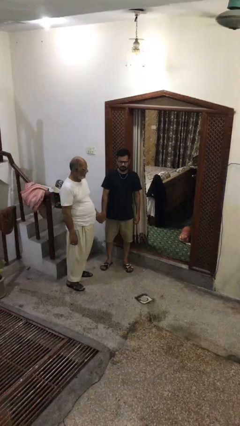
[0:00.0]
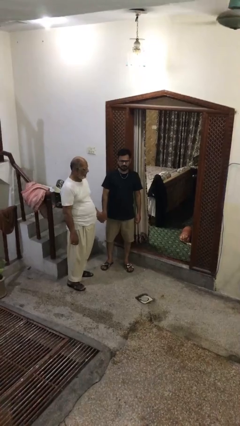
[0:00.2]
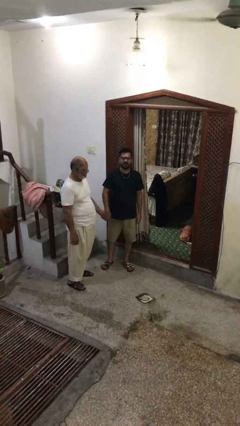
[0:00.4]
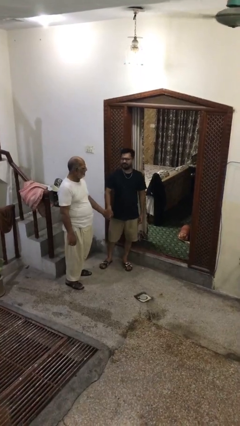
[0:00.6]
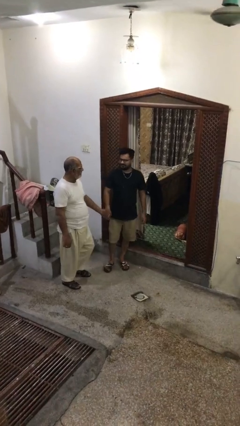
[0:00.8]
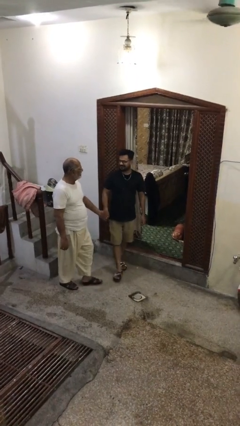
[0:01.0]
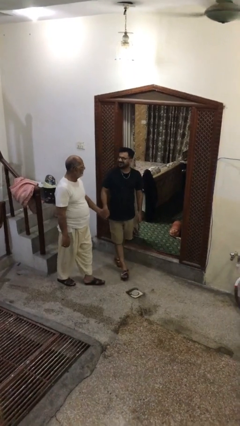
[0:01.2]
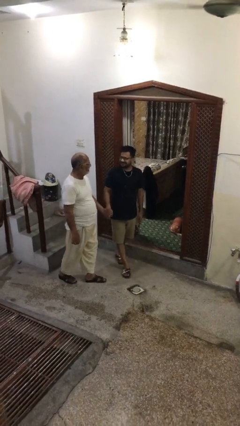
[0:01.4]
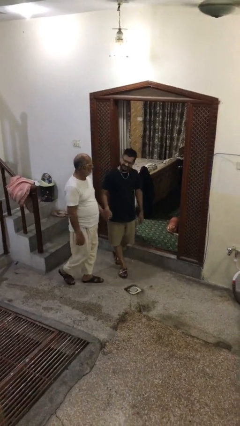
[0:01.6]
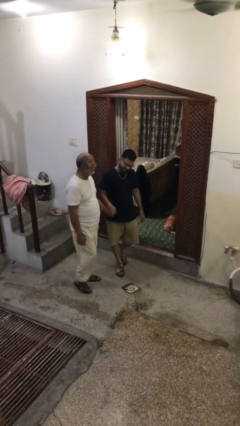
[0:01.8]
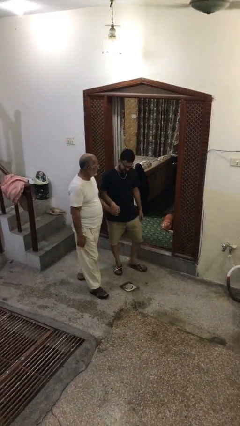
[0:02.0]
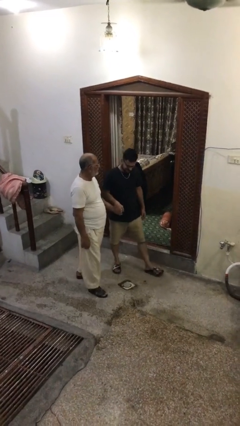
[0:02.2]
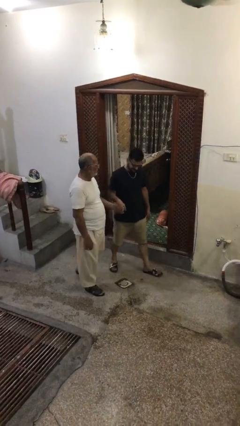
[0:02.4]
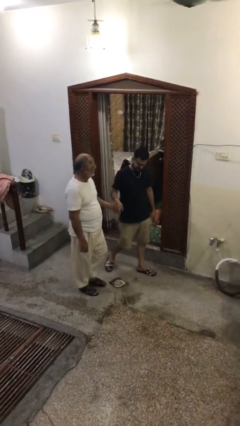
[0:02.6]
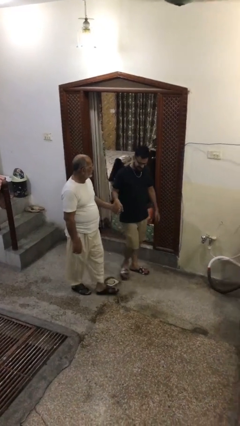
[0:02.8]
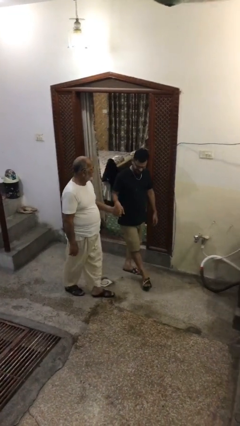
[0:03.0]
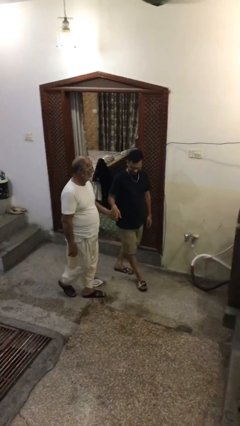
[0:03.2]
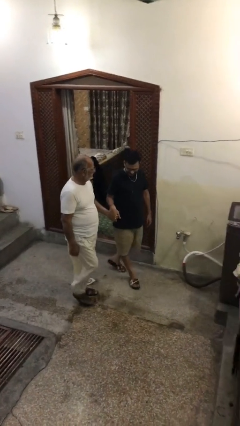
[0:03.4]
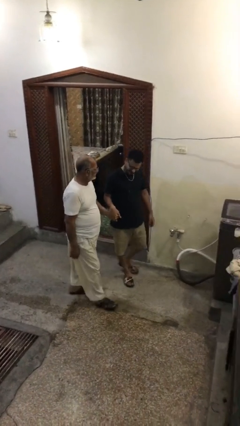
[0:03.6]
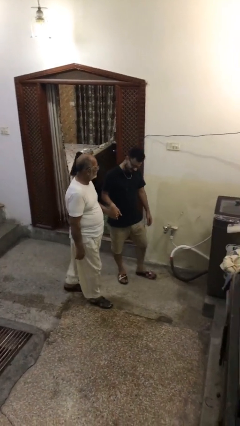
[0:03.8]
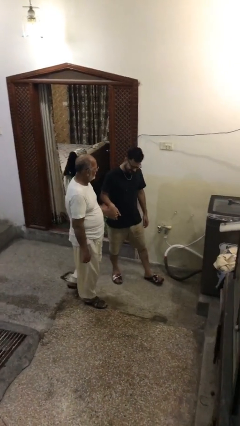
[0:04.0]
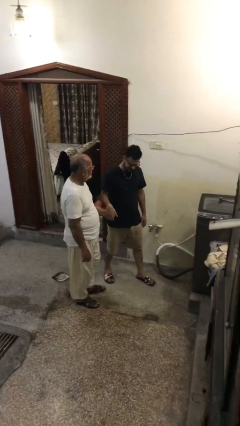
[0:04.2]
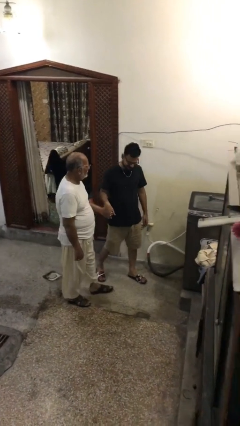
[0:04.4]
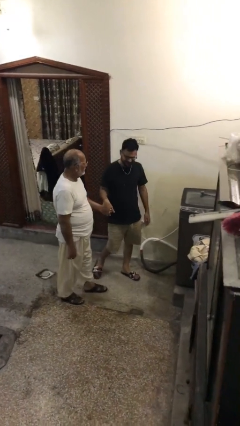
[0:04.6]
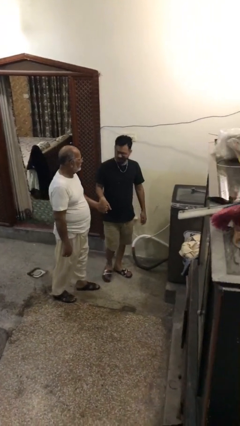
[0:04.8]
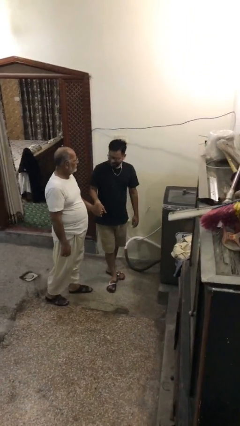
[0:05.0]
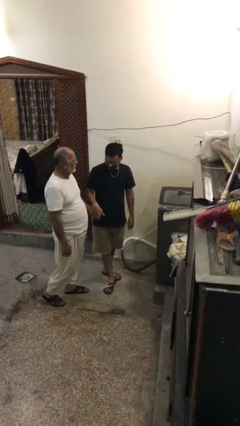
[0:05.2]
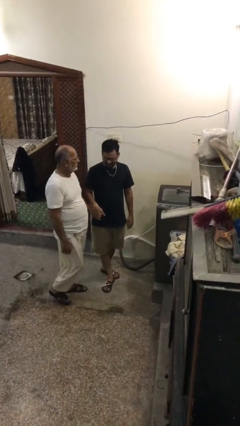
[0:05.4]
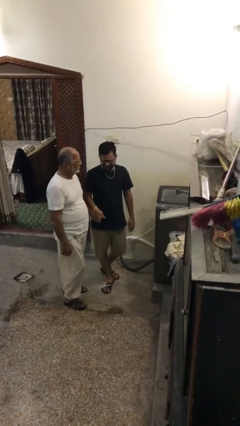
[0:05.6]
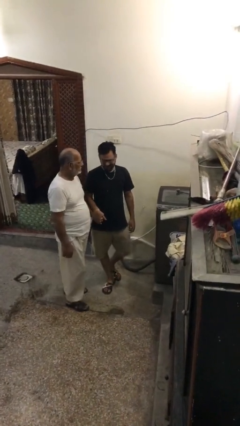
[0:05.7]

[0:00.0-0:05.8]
person holds hand

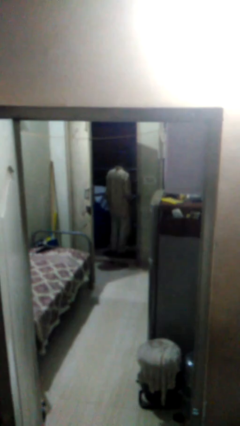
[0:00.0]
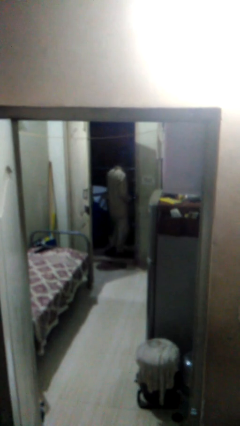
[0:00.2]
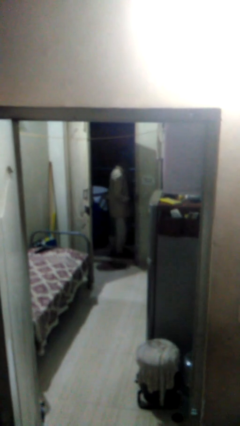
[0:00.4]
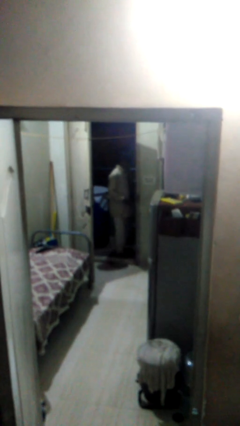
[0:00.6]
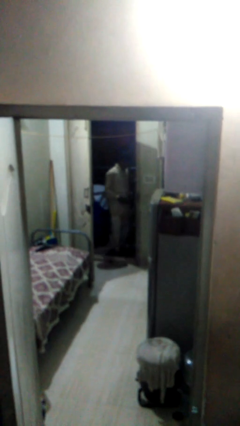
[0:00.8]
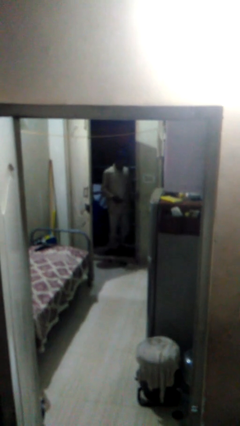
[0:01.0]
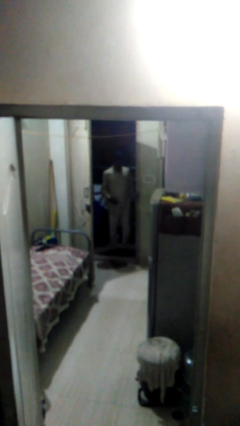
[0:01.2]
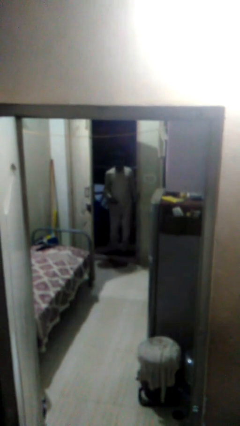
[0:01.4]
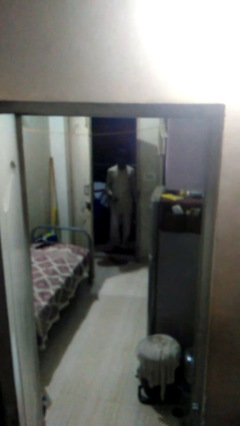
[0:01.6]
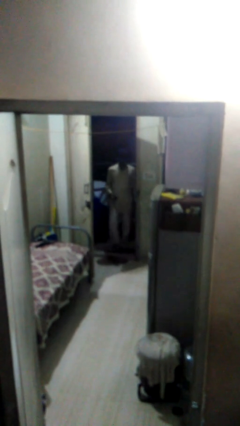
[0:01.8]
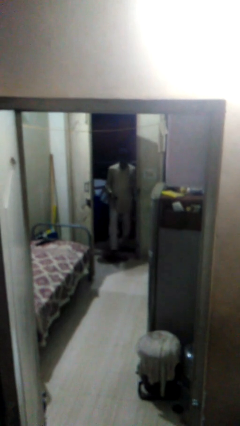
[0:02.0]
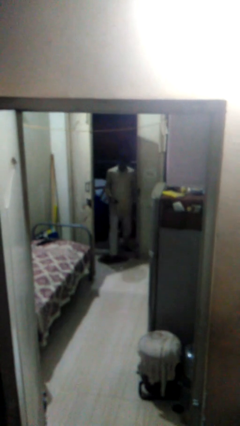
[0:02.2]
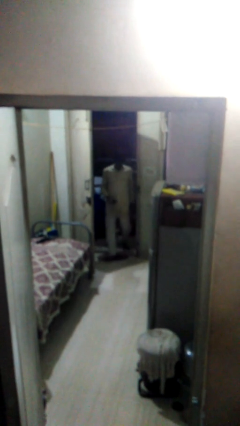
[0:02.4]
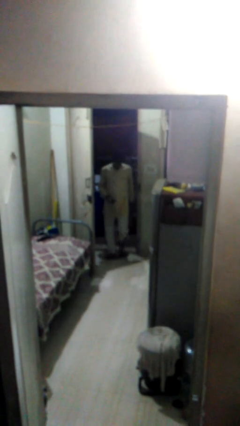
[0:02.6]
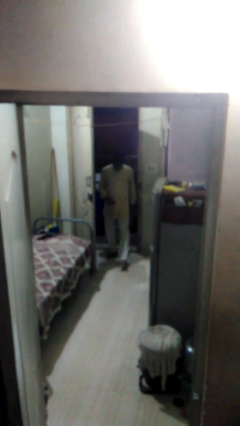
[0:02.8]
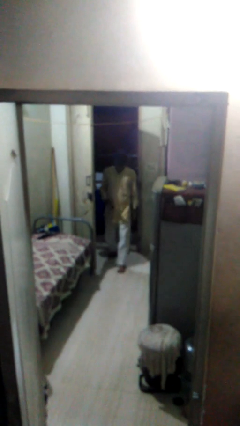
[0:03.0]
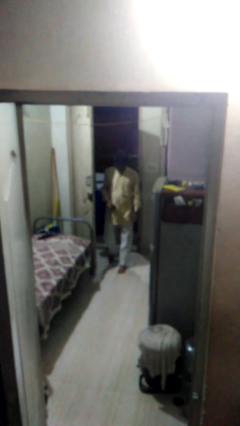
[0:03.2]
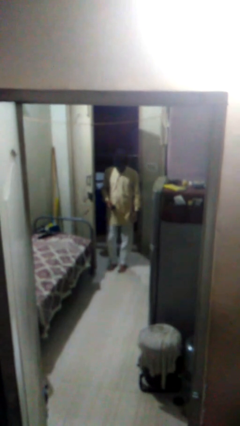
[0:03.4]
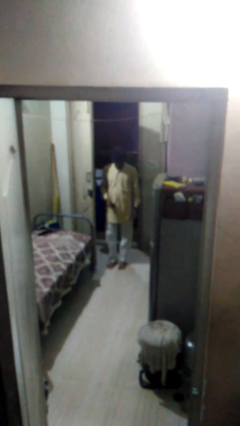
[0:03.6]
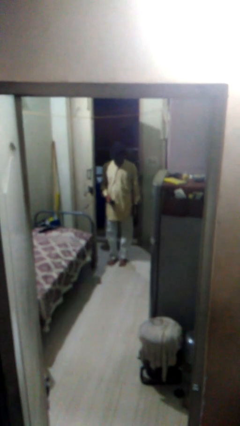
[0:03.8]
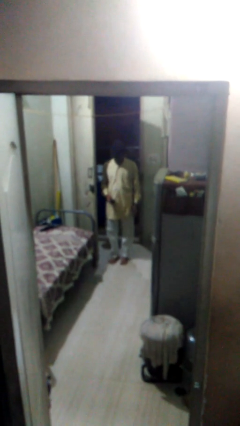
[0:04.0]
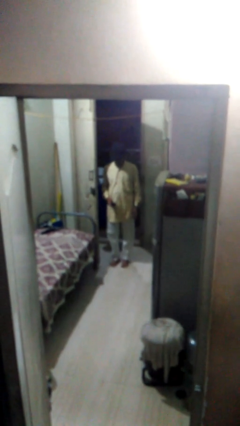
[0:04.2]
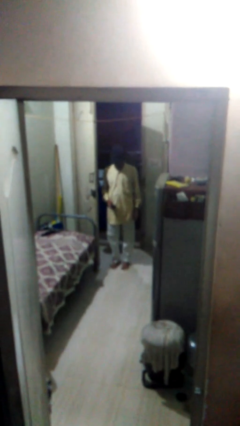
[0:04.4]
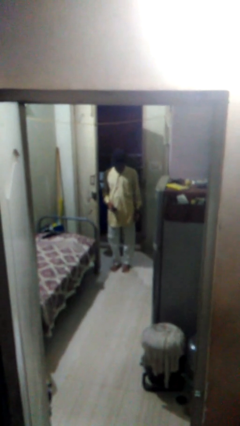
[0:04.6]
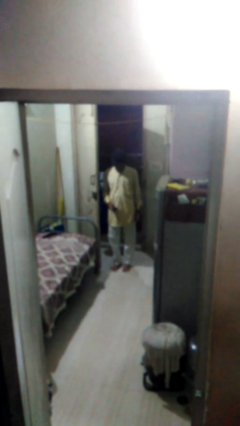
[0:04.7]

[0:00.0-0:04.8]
person enters scene through structure

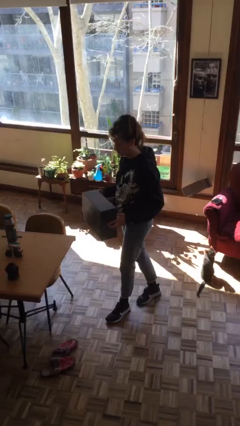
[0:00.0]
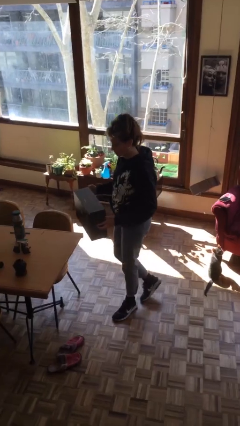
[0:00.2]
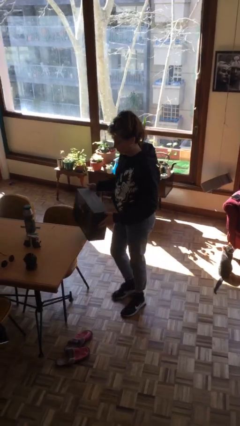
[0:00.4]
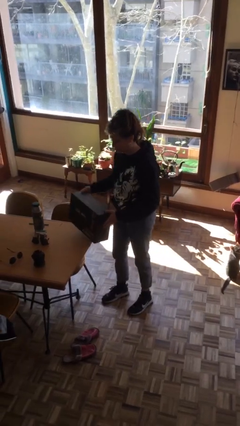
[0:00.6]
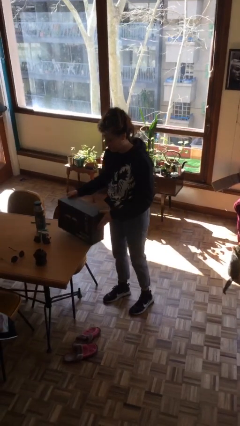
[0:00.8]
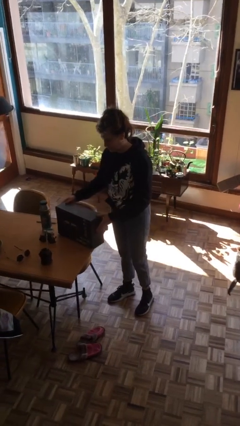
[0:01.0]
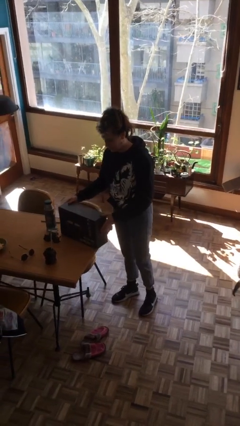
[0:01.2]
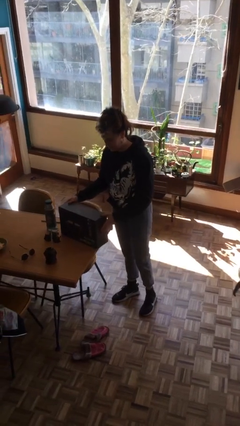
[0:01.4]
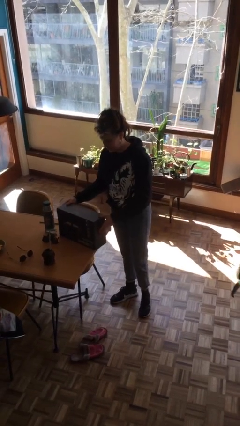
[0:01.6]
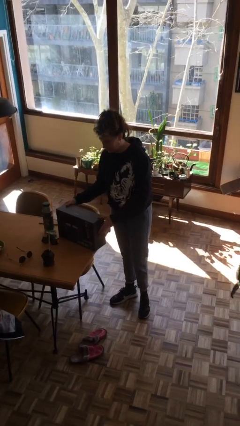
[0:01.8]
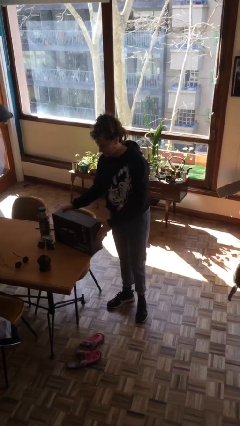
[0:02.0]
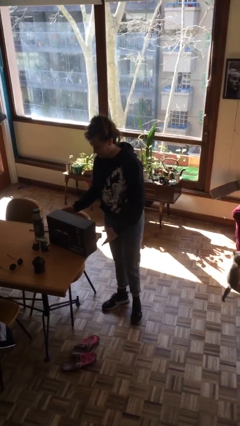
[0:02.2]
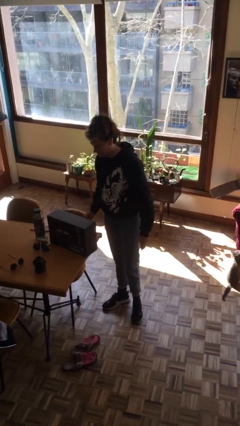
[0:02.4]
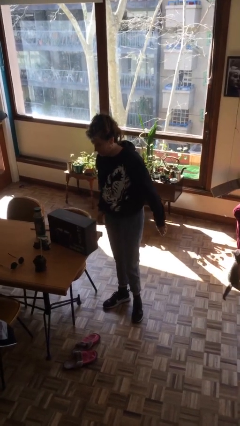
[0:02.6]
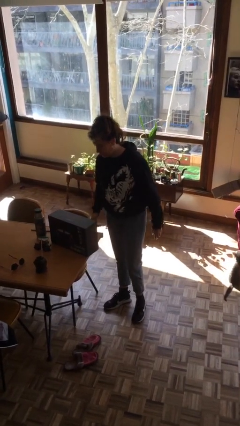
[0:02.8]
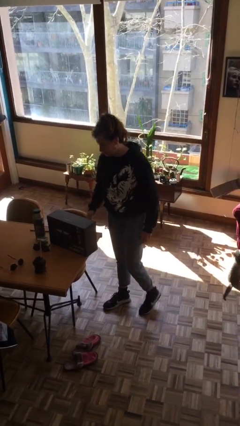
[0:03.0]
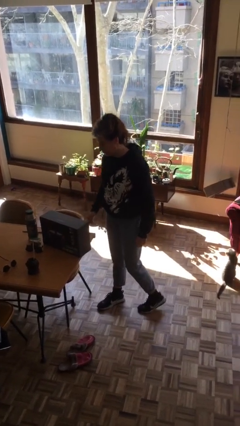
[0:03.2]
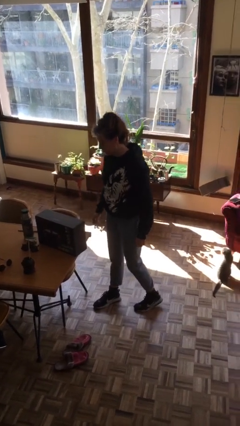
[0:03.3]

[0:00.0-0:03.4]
person puts down object on table

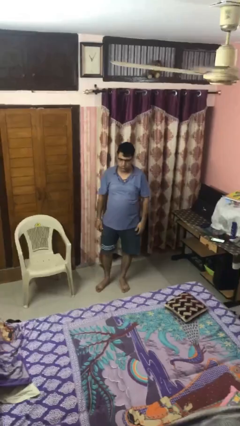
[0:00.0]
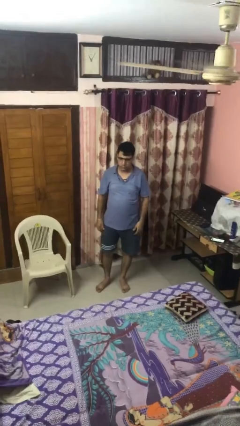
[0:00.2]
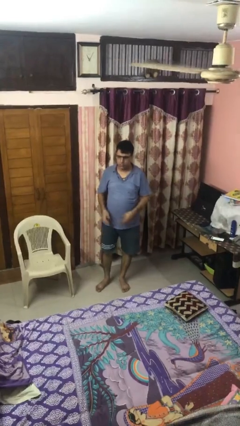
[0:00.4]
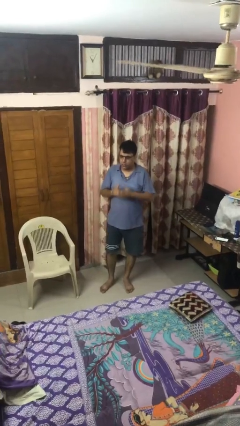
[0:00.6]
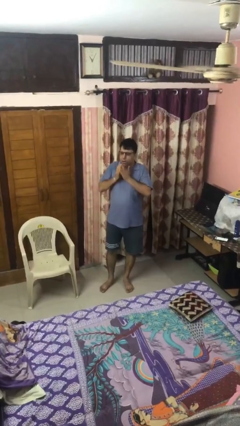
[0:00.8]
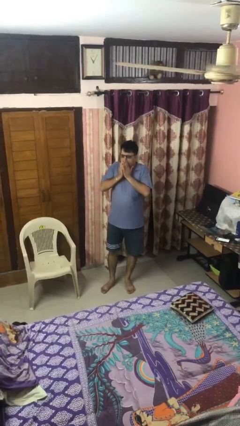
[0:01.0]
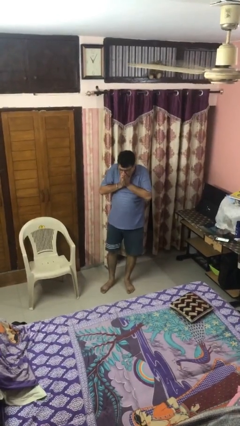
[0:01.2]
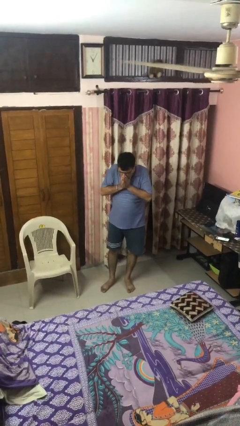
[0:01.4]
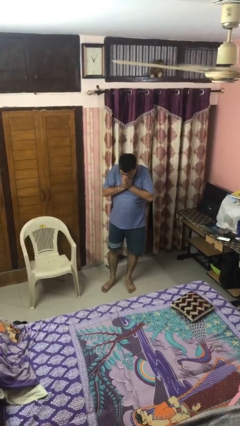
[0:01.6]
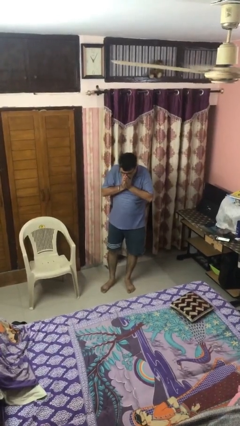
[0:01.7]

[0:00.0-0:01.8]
person sneezes into hand

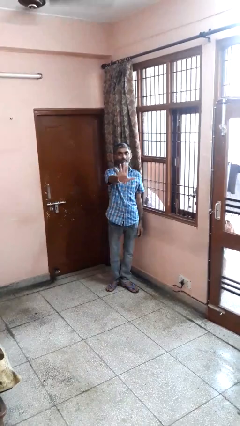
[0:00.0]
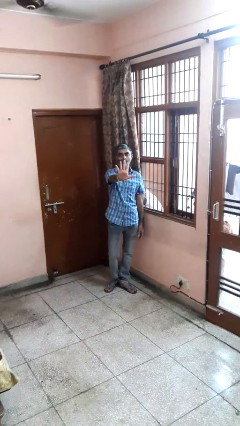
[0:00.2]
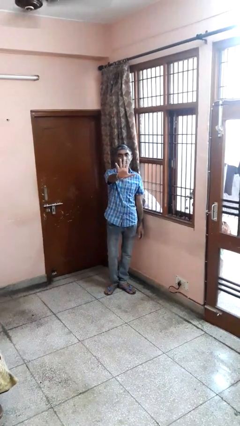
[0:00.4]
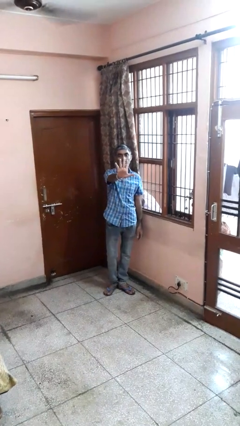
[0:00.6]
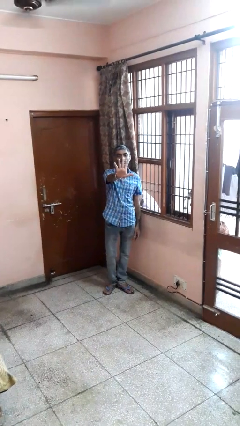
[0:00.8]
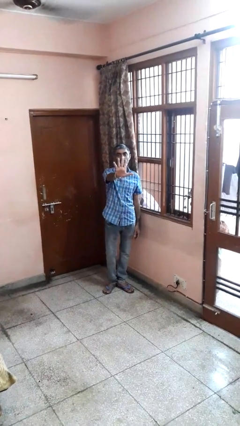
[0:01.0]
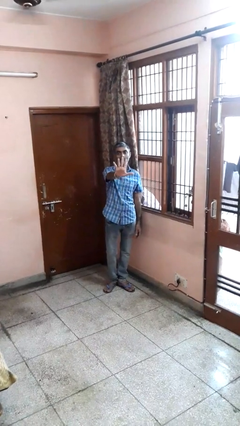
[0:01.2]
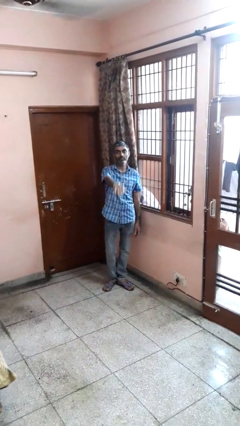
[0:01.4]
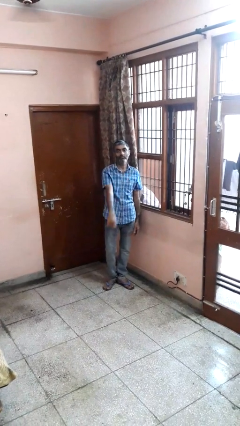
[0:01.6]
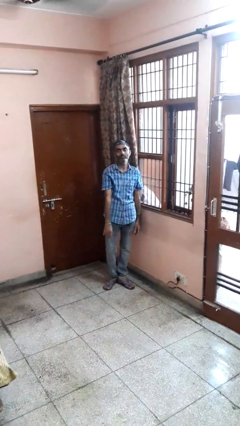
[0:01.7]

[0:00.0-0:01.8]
person gestures number five
